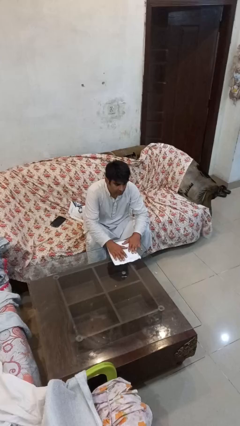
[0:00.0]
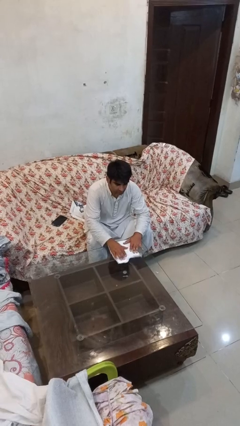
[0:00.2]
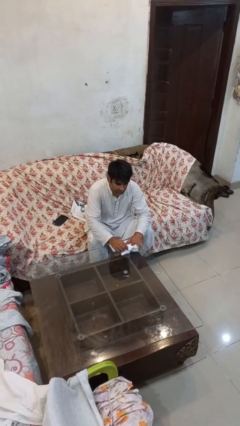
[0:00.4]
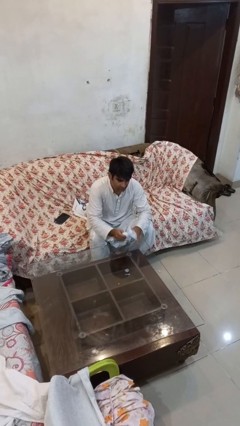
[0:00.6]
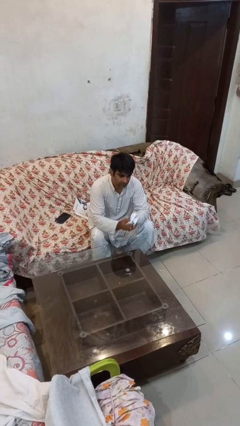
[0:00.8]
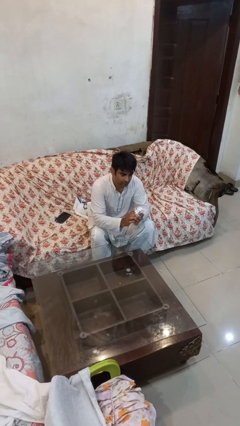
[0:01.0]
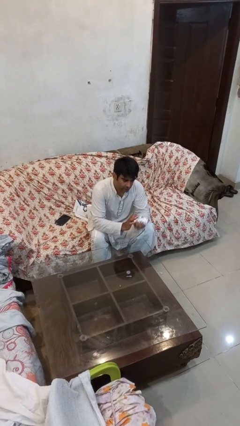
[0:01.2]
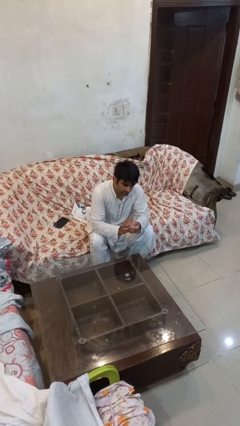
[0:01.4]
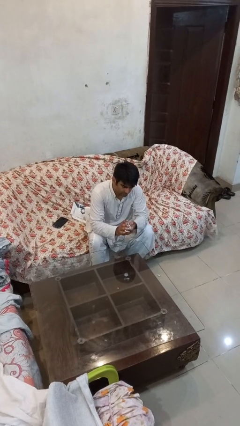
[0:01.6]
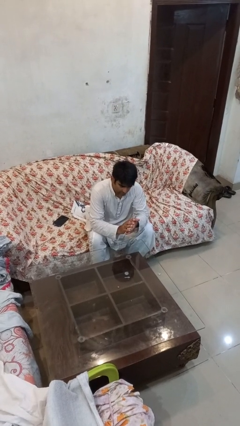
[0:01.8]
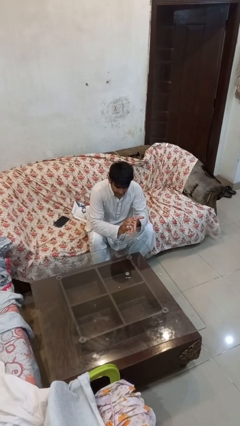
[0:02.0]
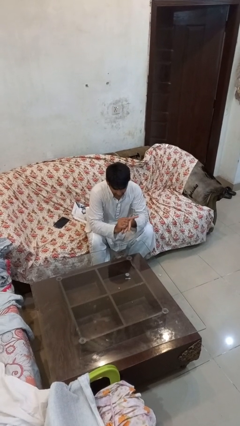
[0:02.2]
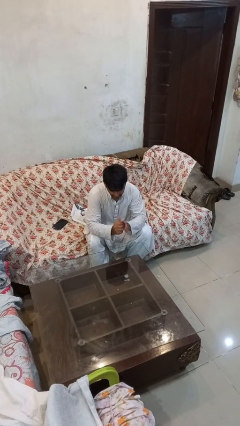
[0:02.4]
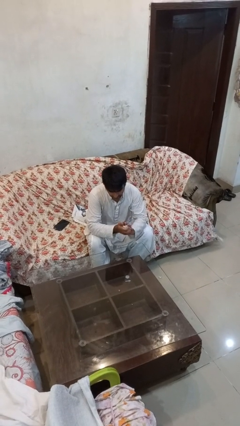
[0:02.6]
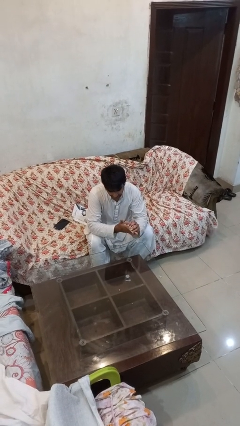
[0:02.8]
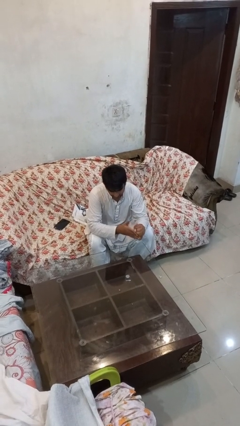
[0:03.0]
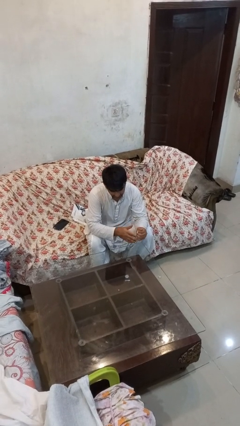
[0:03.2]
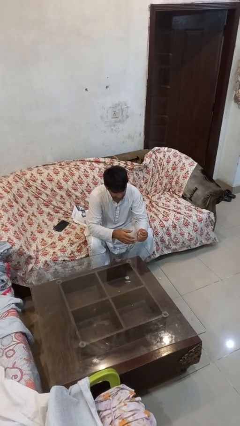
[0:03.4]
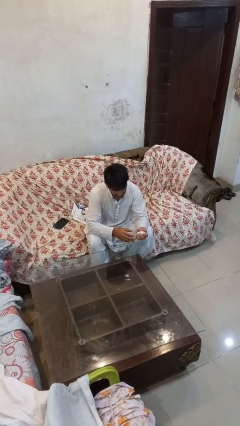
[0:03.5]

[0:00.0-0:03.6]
person crumples paper

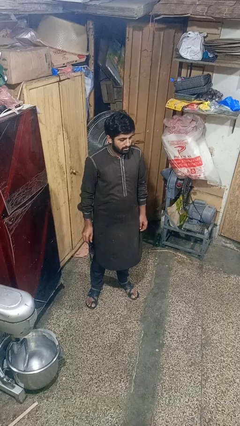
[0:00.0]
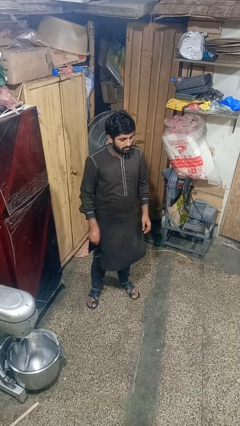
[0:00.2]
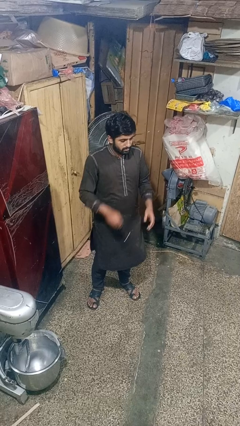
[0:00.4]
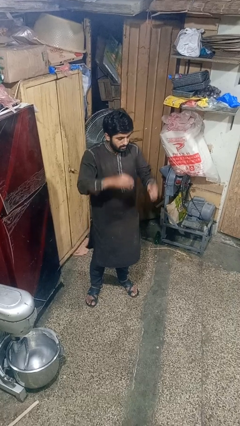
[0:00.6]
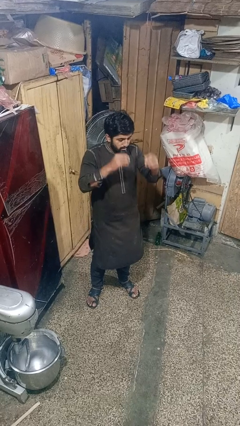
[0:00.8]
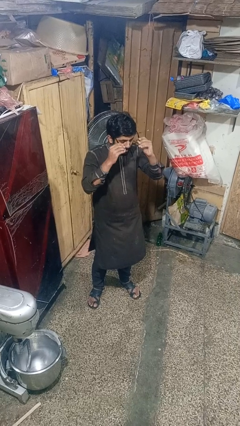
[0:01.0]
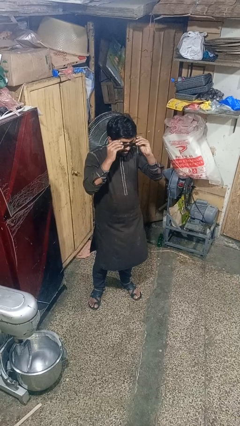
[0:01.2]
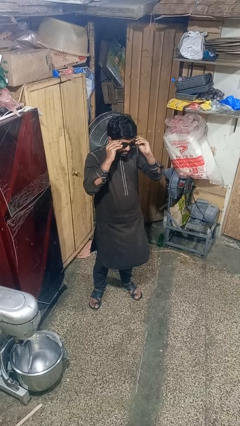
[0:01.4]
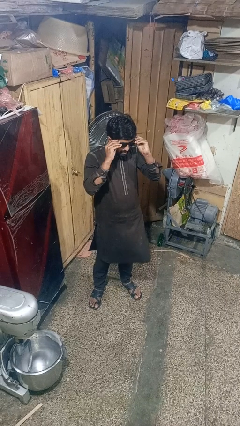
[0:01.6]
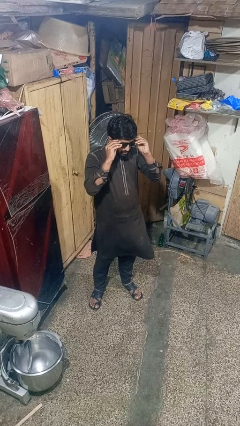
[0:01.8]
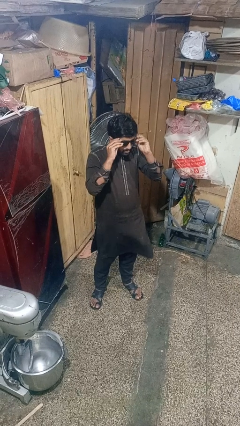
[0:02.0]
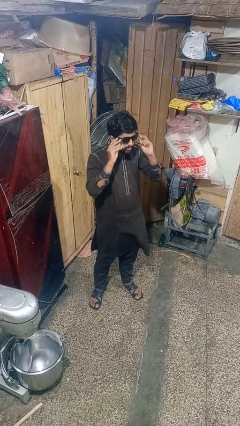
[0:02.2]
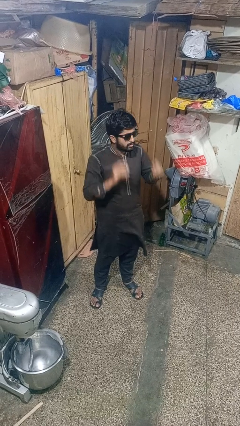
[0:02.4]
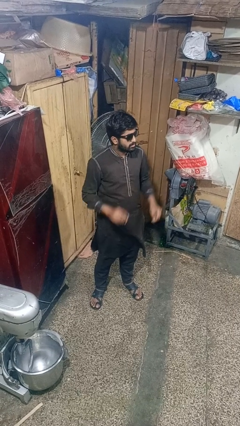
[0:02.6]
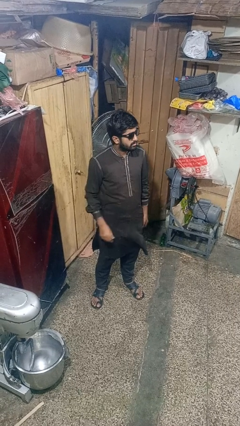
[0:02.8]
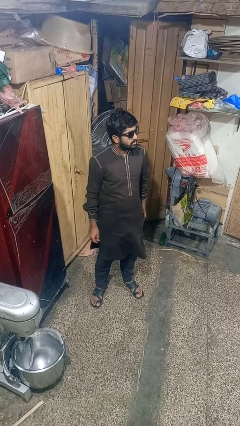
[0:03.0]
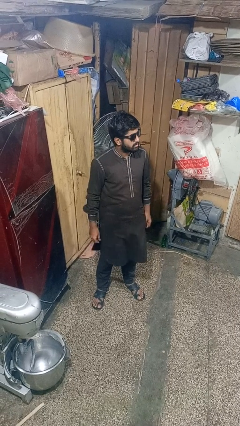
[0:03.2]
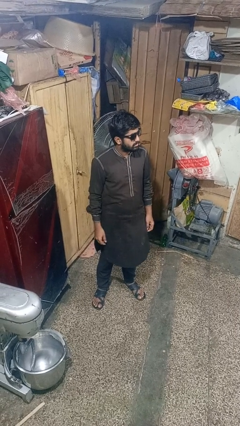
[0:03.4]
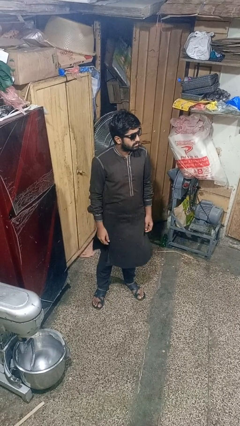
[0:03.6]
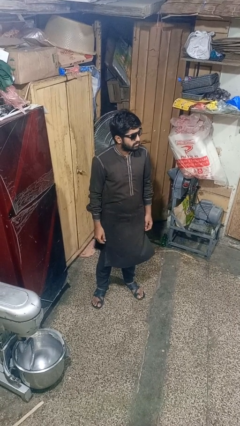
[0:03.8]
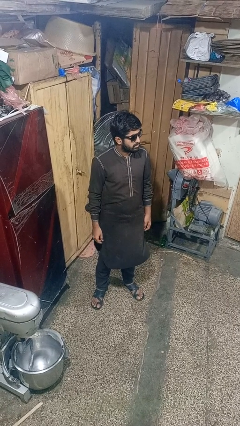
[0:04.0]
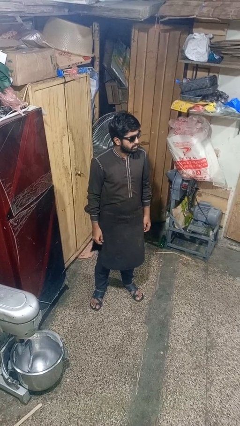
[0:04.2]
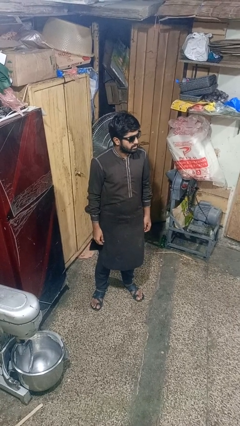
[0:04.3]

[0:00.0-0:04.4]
person puts on sunglasses

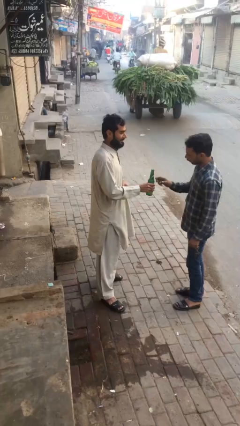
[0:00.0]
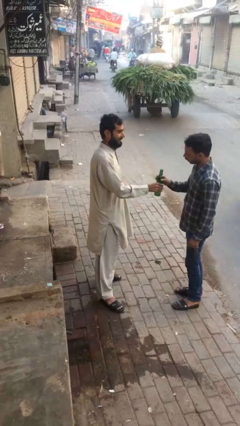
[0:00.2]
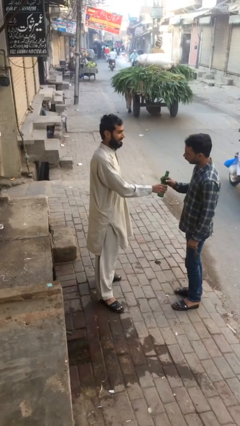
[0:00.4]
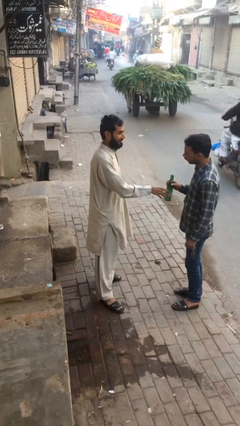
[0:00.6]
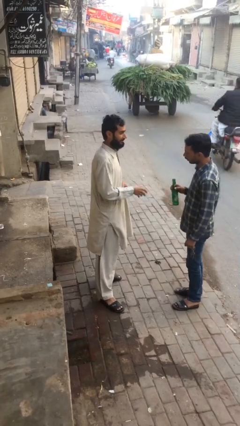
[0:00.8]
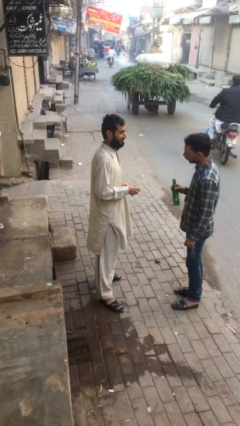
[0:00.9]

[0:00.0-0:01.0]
person transfers object to person

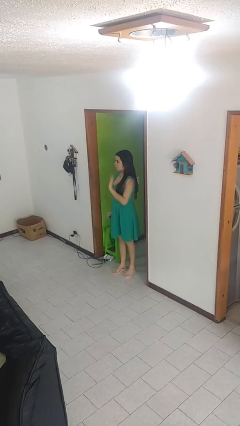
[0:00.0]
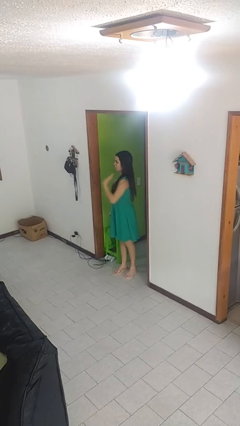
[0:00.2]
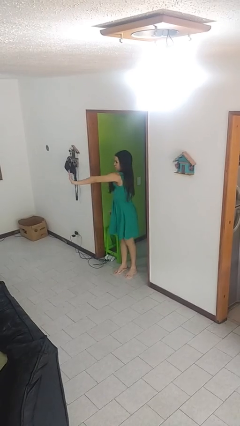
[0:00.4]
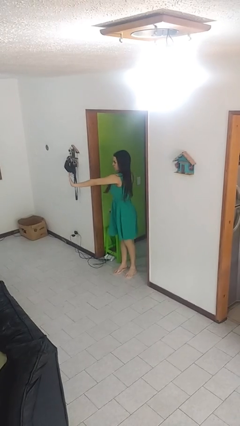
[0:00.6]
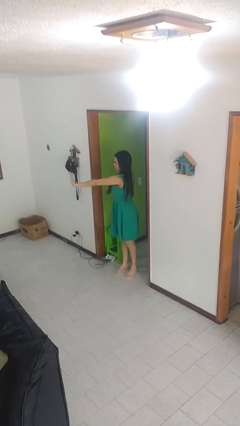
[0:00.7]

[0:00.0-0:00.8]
person gestures stop

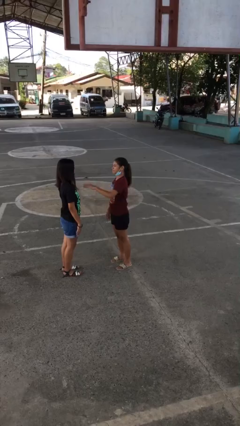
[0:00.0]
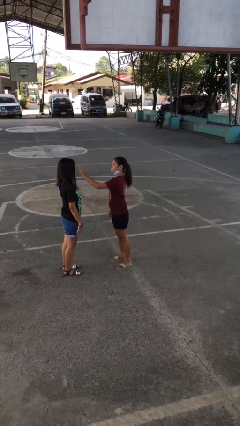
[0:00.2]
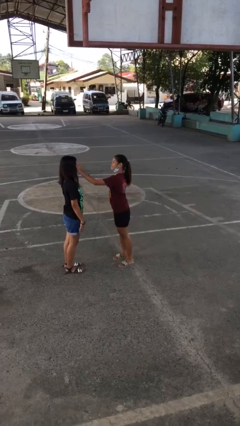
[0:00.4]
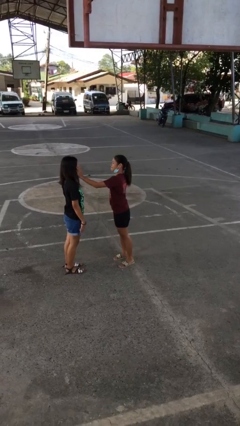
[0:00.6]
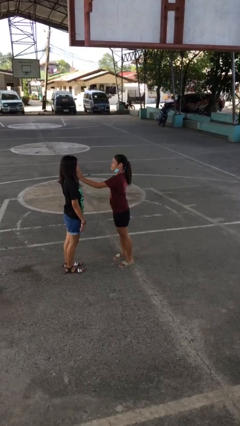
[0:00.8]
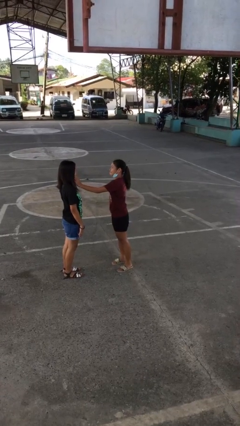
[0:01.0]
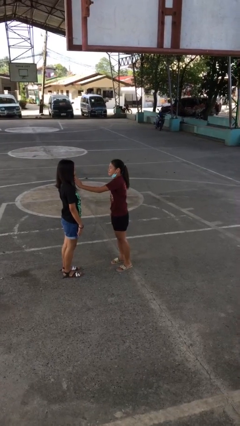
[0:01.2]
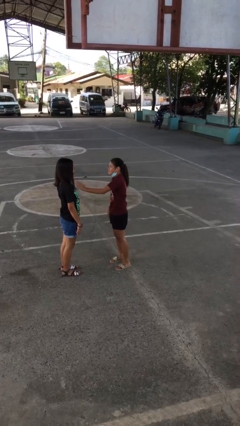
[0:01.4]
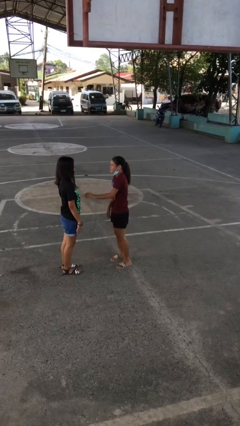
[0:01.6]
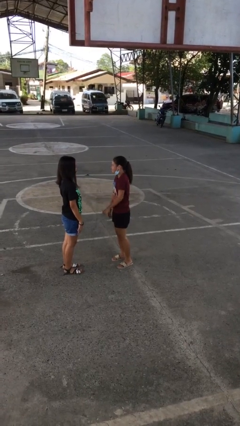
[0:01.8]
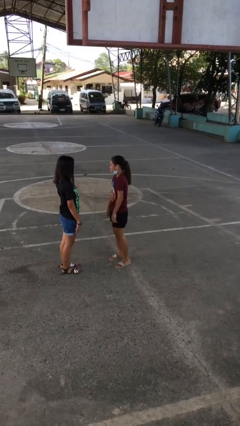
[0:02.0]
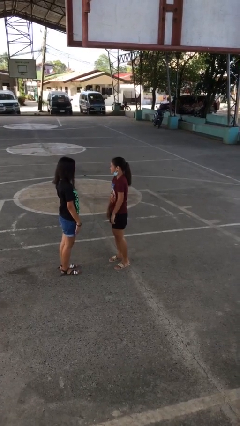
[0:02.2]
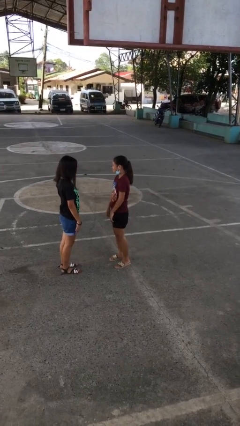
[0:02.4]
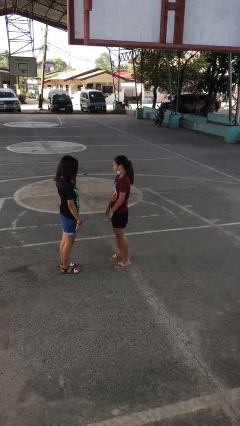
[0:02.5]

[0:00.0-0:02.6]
person touches face of person

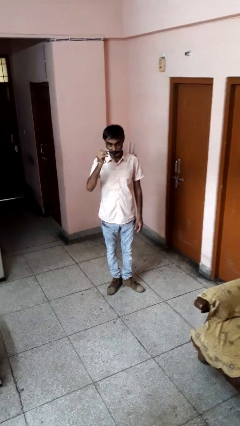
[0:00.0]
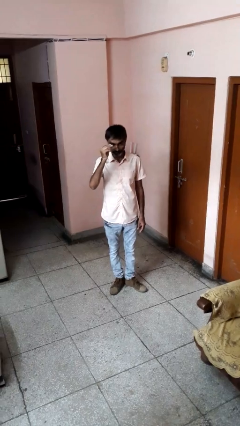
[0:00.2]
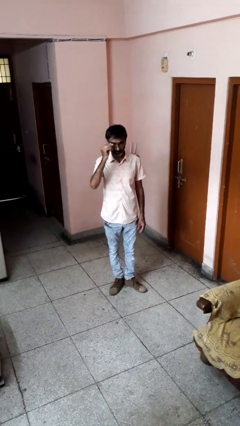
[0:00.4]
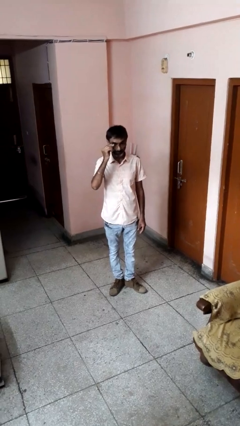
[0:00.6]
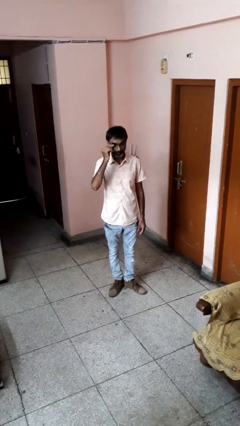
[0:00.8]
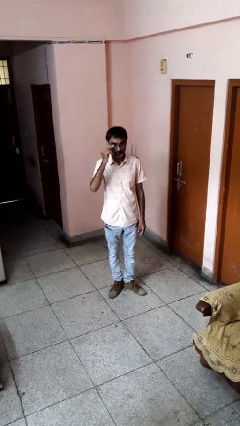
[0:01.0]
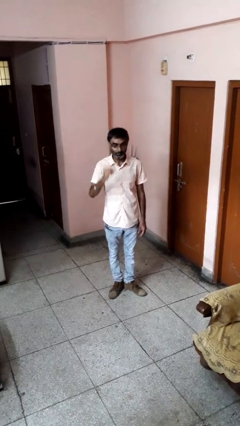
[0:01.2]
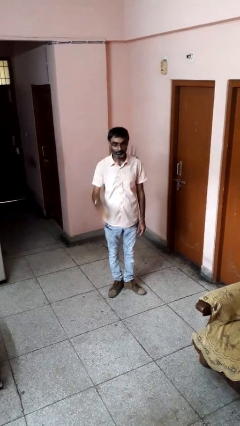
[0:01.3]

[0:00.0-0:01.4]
person puts on glasses

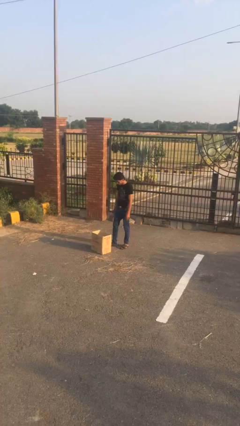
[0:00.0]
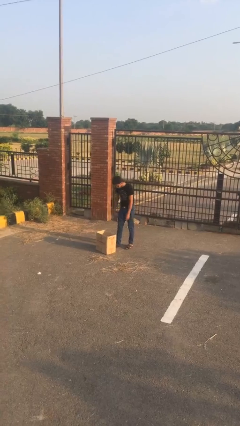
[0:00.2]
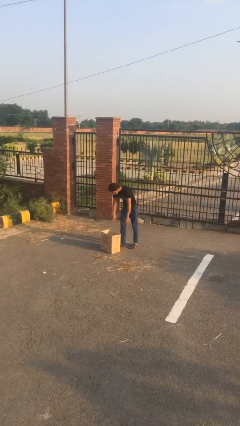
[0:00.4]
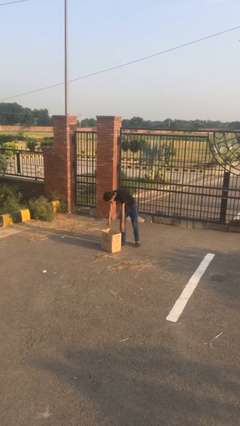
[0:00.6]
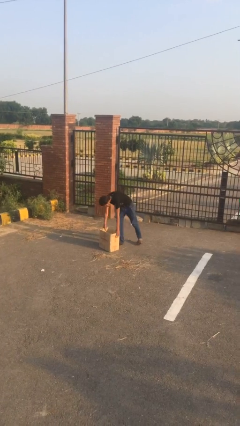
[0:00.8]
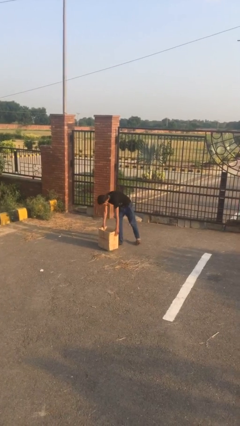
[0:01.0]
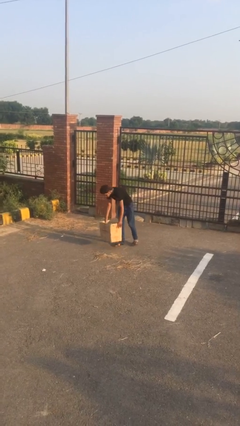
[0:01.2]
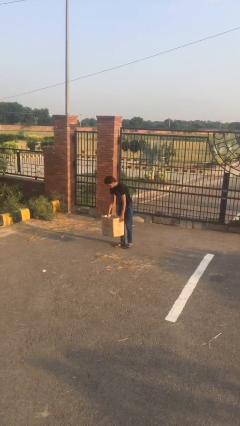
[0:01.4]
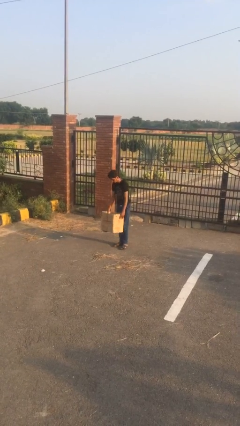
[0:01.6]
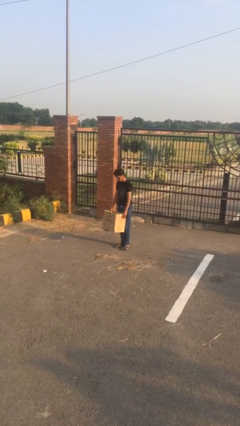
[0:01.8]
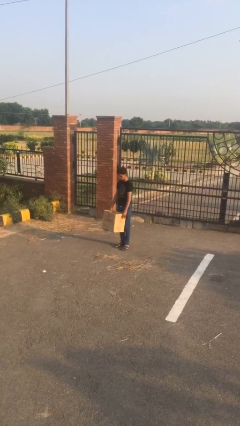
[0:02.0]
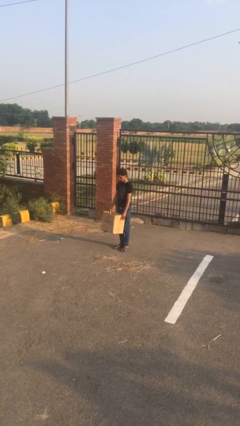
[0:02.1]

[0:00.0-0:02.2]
person picks up object from floor

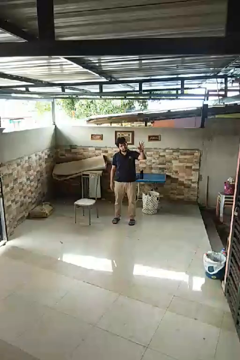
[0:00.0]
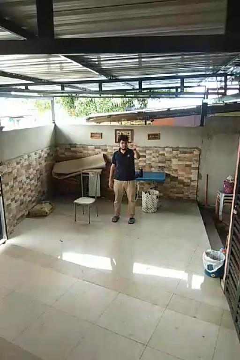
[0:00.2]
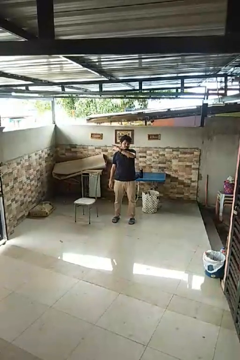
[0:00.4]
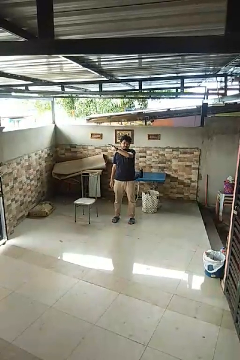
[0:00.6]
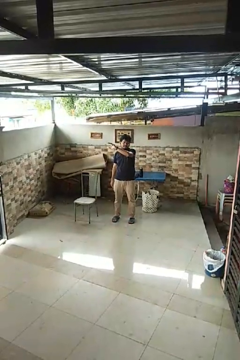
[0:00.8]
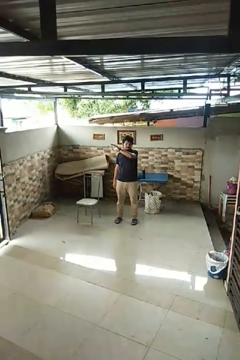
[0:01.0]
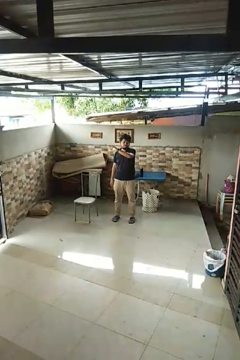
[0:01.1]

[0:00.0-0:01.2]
person gestures swipe right
